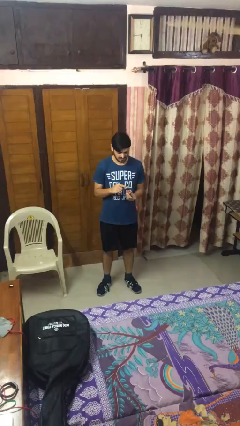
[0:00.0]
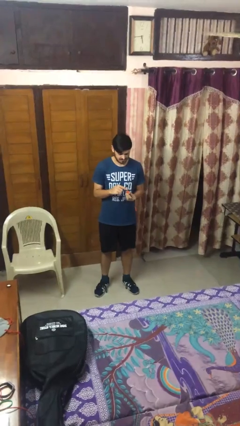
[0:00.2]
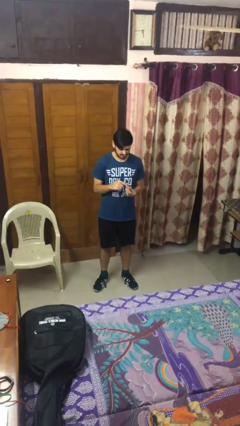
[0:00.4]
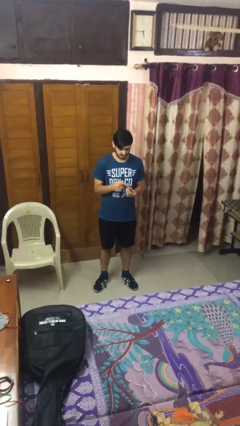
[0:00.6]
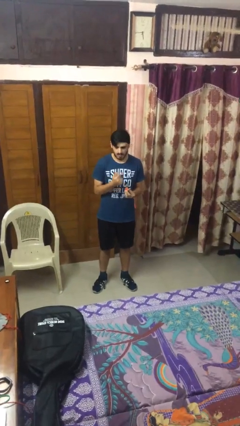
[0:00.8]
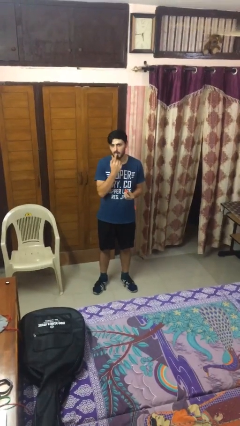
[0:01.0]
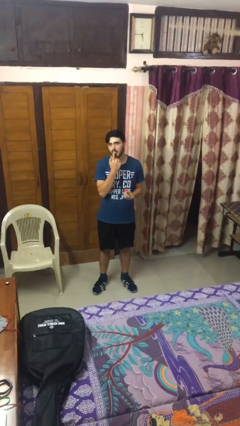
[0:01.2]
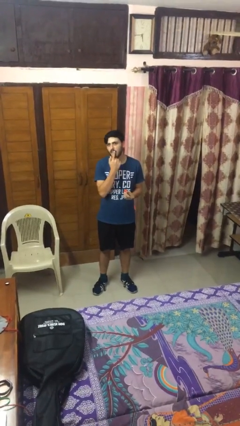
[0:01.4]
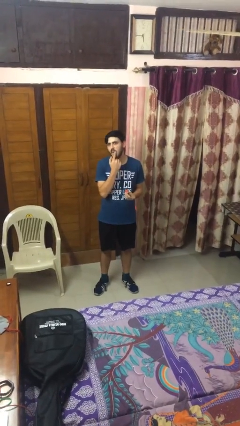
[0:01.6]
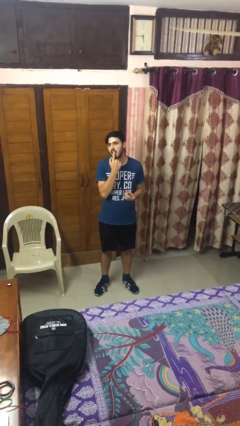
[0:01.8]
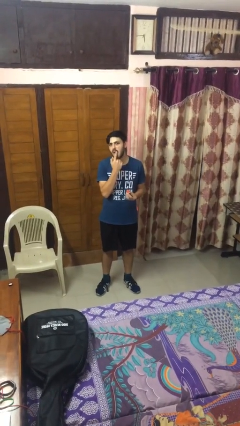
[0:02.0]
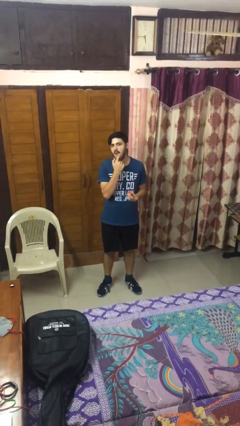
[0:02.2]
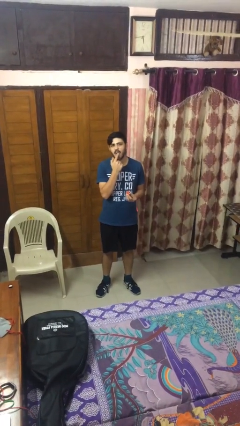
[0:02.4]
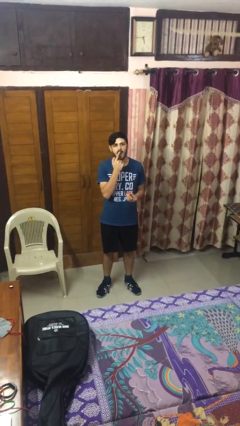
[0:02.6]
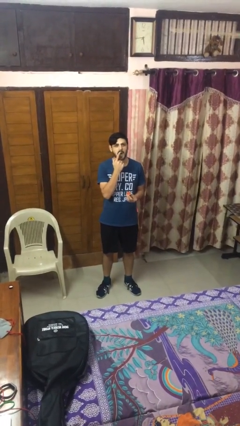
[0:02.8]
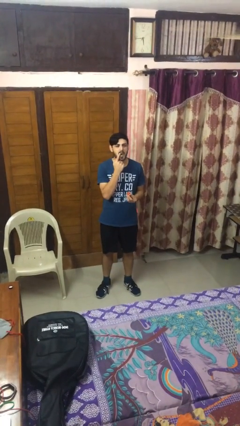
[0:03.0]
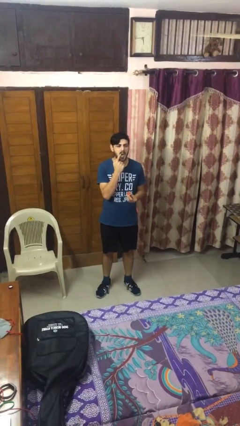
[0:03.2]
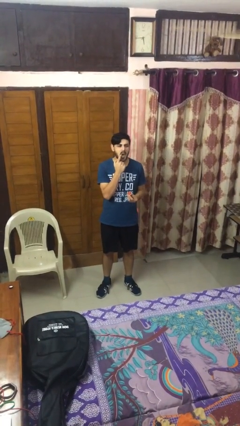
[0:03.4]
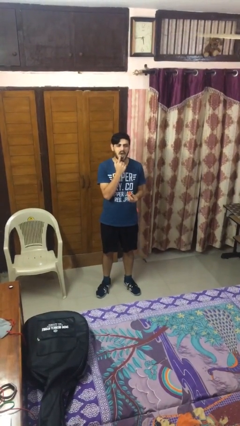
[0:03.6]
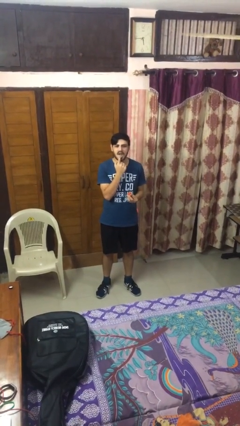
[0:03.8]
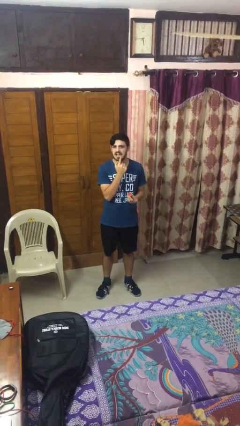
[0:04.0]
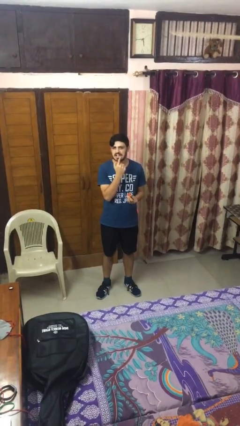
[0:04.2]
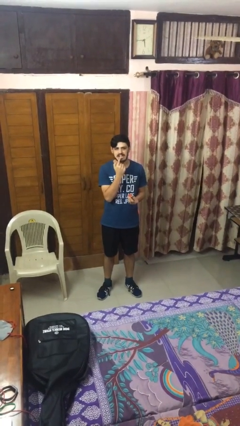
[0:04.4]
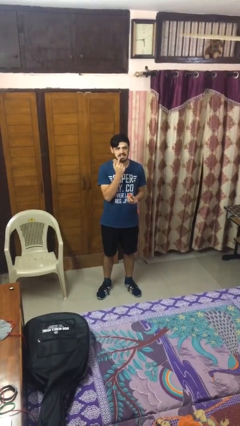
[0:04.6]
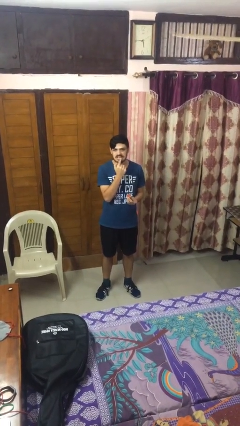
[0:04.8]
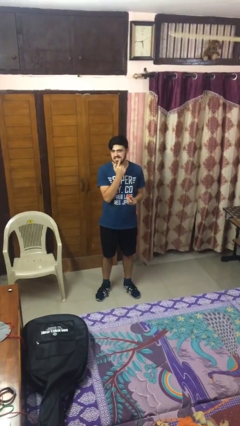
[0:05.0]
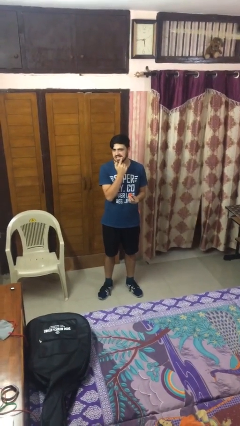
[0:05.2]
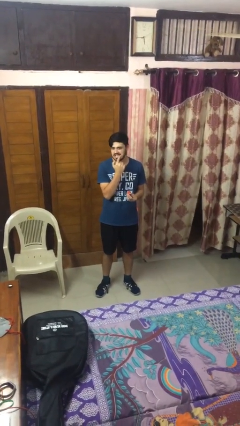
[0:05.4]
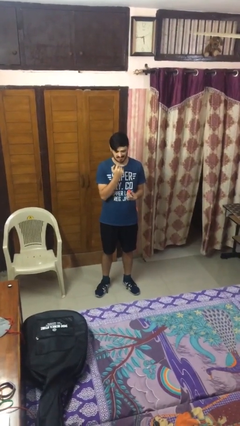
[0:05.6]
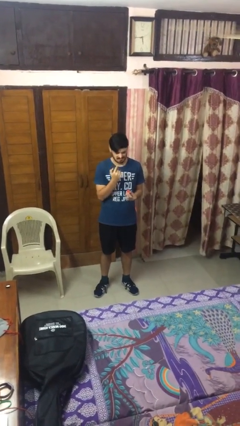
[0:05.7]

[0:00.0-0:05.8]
person applies lip makeup

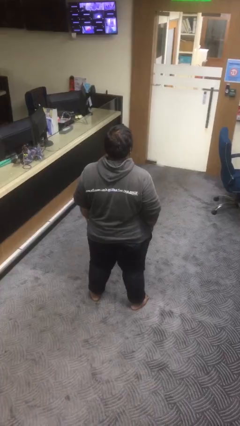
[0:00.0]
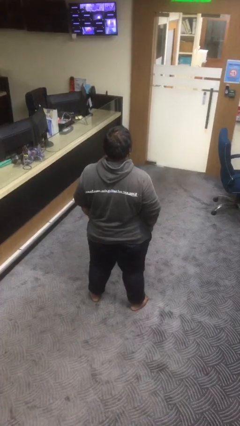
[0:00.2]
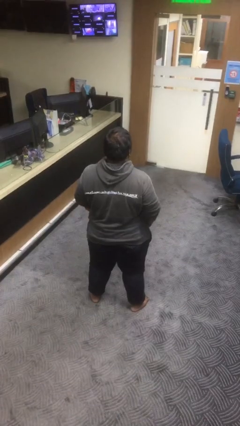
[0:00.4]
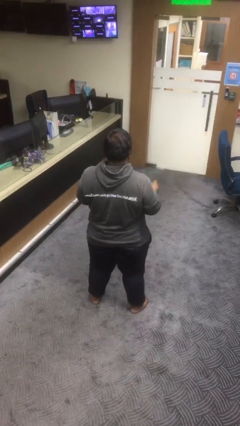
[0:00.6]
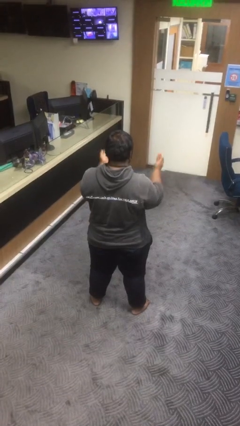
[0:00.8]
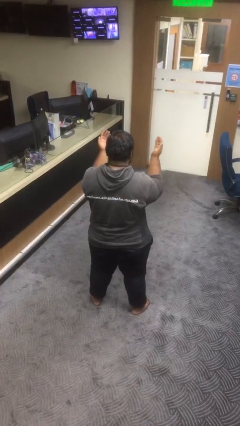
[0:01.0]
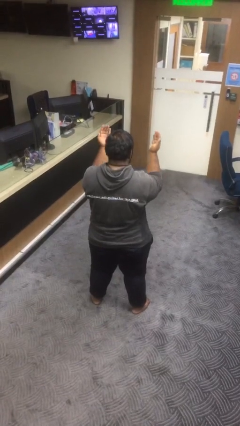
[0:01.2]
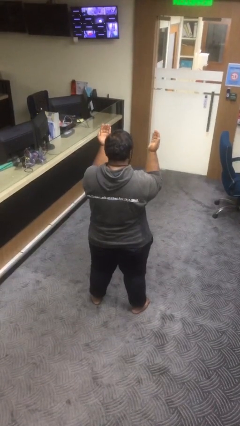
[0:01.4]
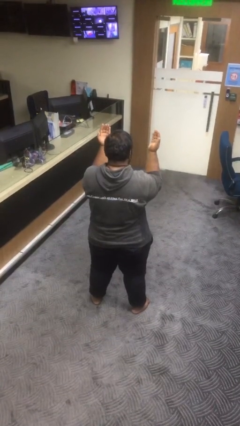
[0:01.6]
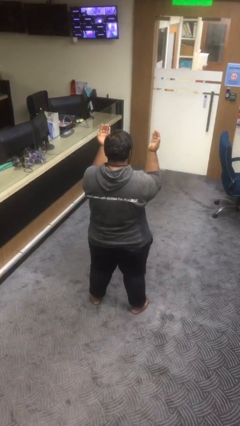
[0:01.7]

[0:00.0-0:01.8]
person prays

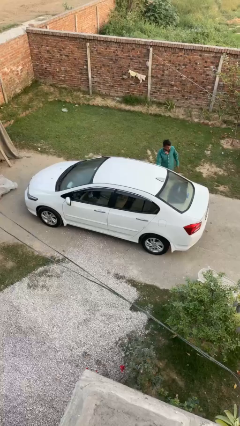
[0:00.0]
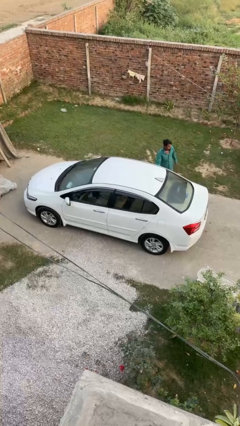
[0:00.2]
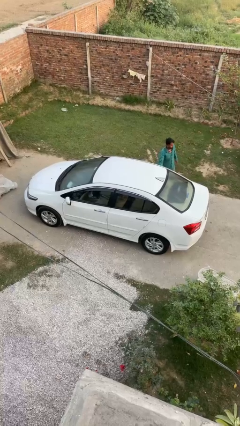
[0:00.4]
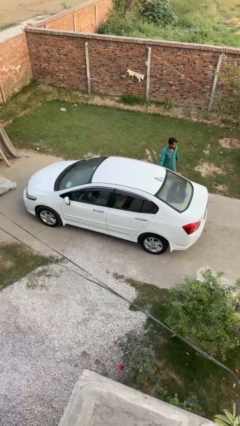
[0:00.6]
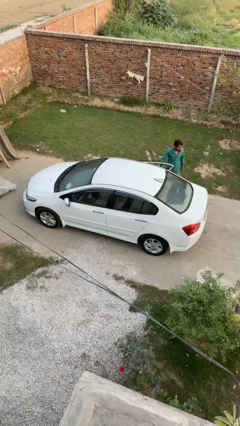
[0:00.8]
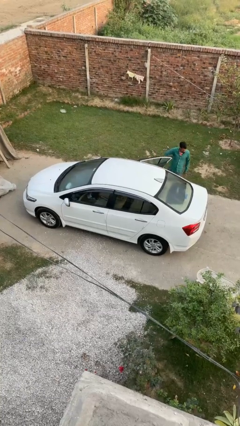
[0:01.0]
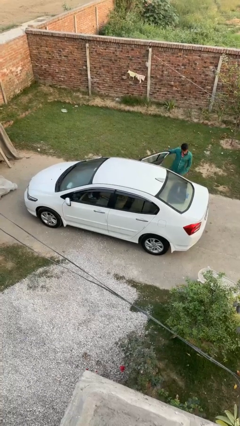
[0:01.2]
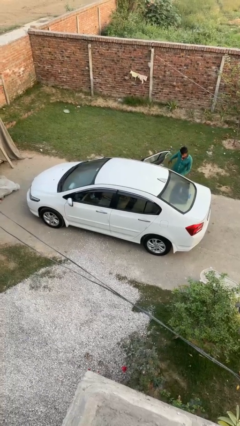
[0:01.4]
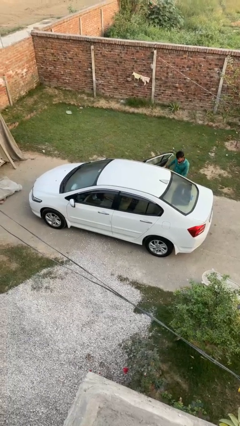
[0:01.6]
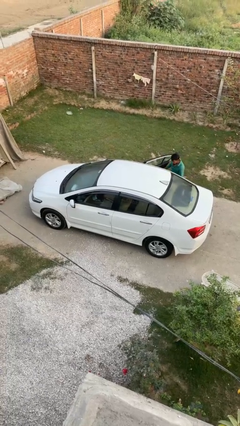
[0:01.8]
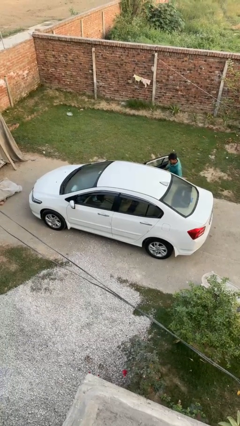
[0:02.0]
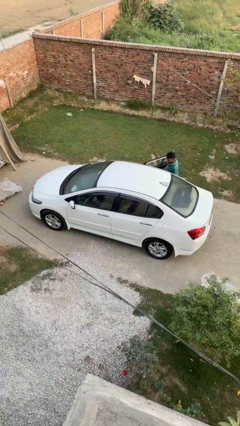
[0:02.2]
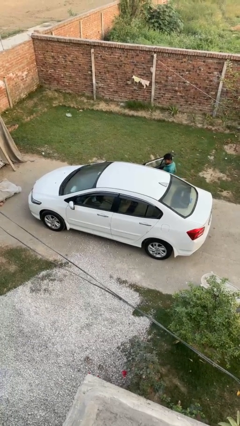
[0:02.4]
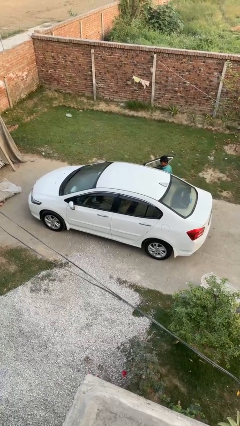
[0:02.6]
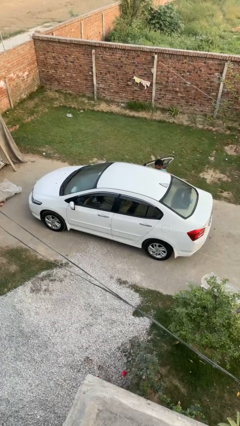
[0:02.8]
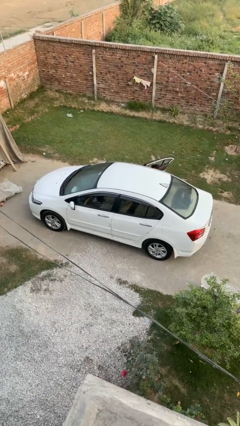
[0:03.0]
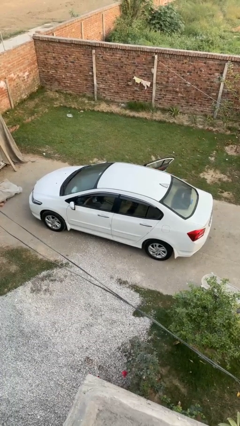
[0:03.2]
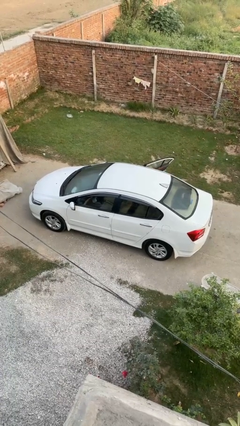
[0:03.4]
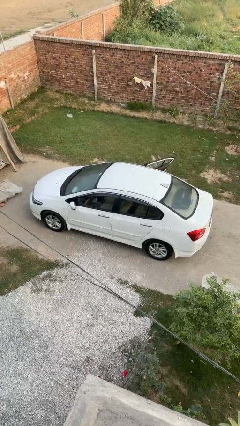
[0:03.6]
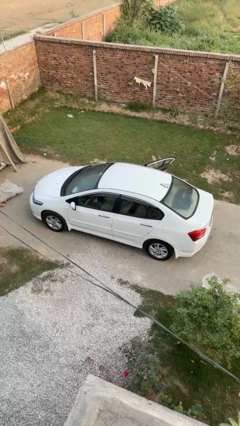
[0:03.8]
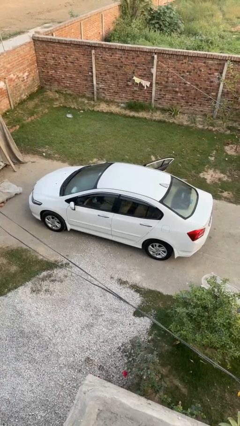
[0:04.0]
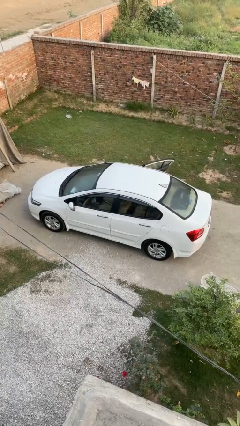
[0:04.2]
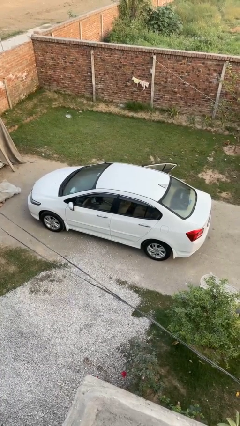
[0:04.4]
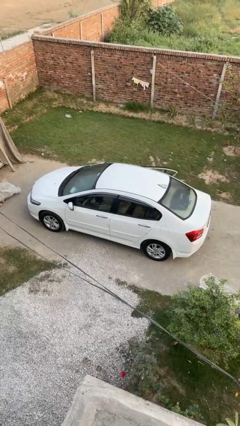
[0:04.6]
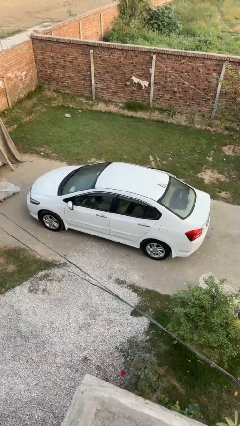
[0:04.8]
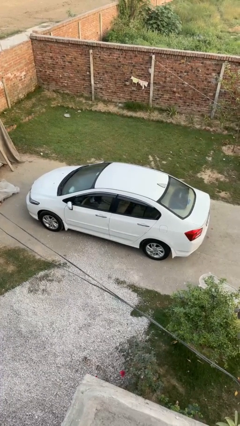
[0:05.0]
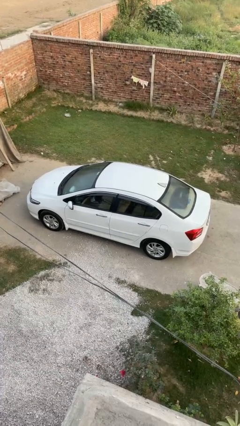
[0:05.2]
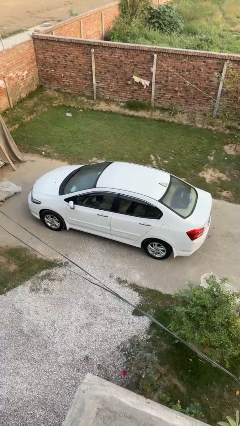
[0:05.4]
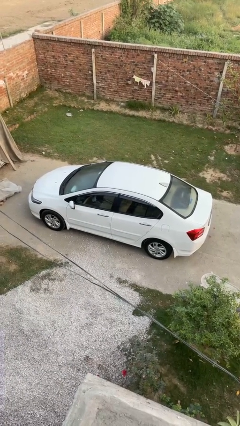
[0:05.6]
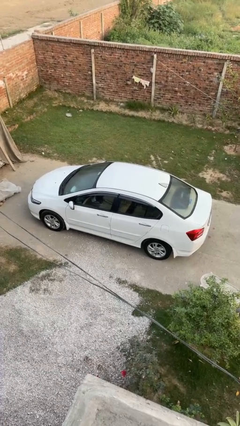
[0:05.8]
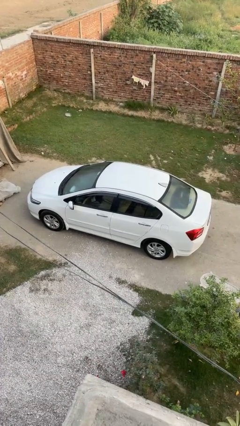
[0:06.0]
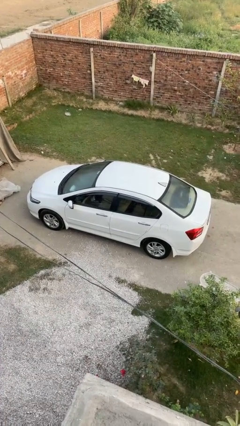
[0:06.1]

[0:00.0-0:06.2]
car picks up person

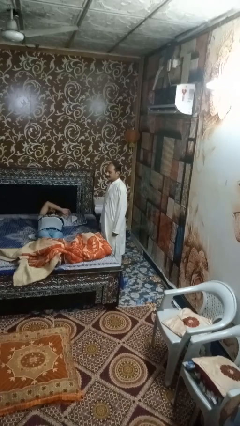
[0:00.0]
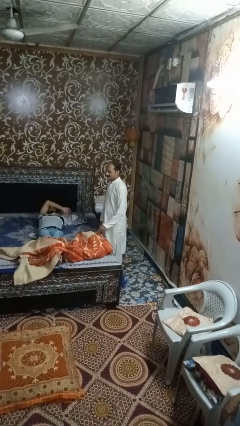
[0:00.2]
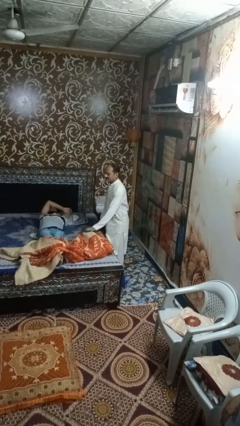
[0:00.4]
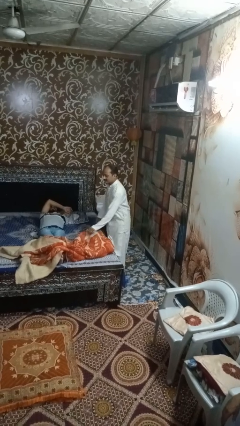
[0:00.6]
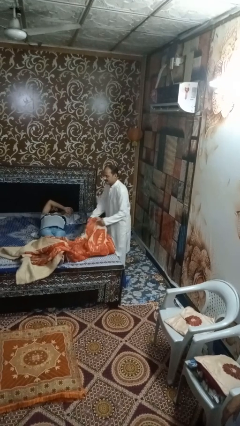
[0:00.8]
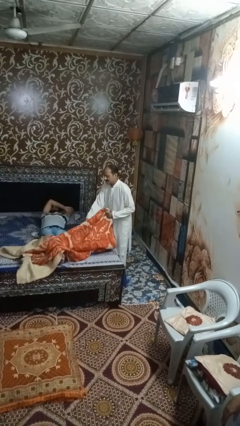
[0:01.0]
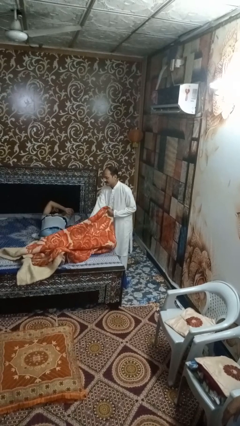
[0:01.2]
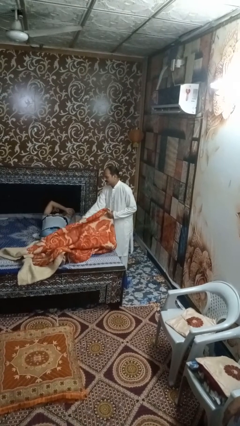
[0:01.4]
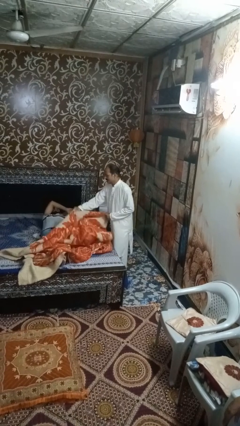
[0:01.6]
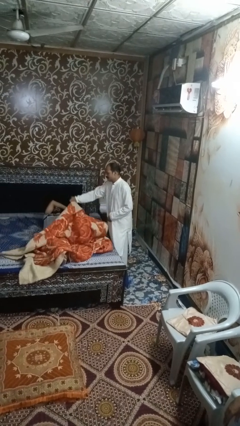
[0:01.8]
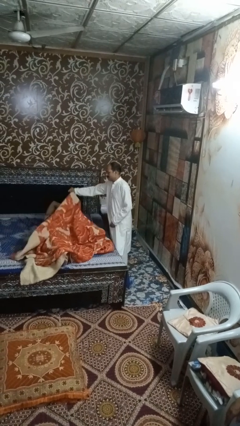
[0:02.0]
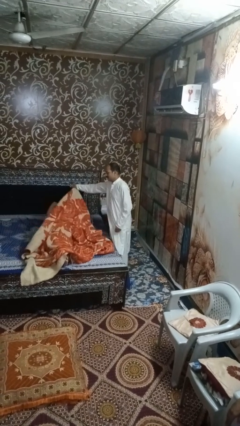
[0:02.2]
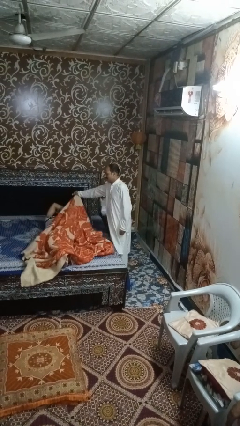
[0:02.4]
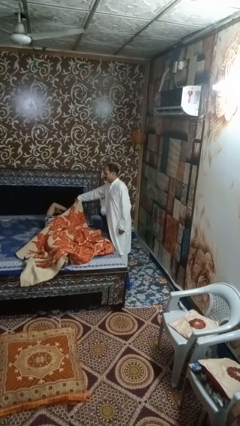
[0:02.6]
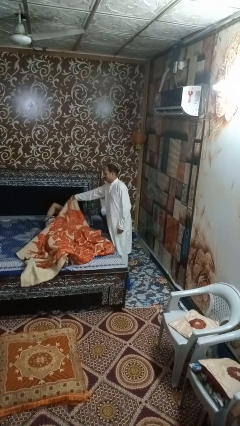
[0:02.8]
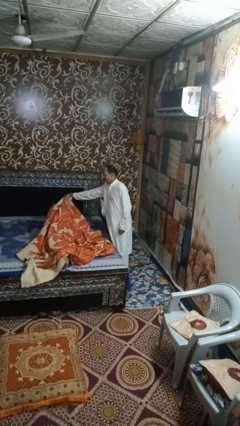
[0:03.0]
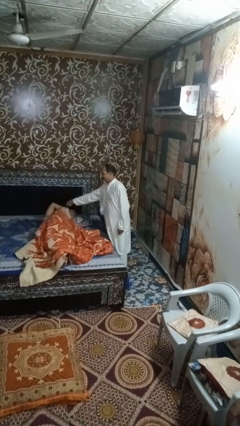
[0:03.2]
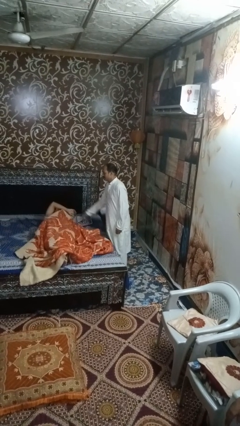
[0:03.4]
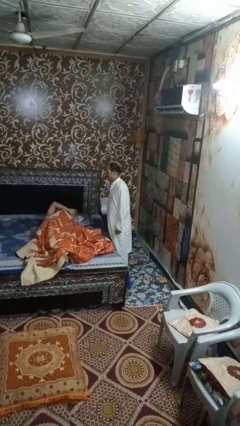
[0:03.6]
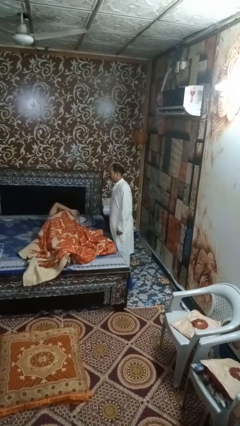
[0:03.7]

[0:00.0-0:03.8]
person covers friend with blanket
